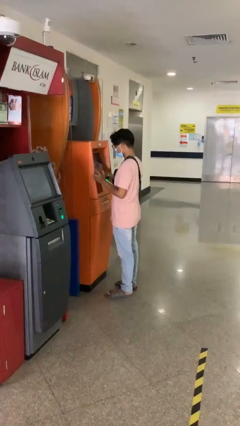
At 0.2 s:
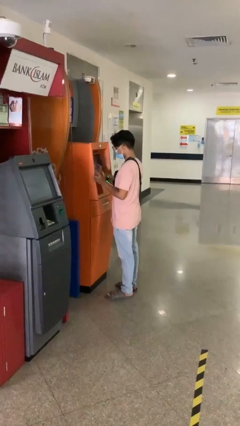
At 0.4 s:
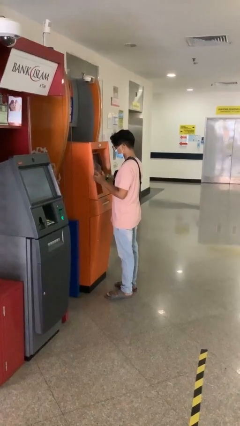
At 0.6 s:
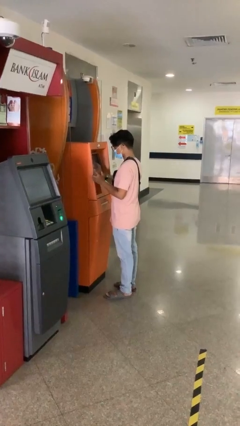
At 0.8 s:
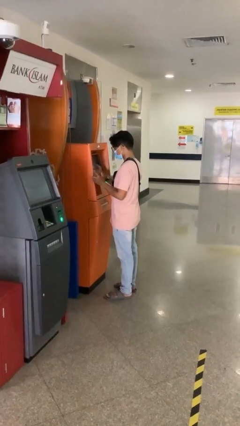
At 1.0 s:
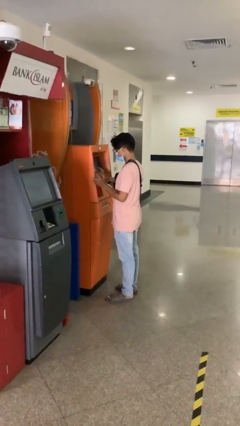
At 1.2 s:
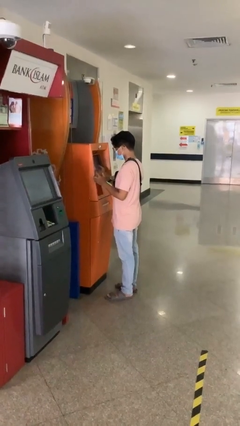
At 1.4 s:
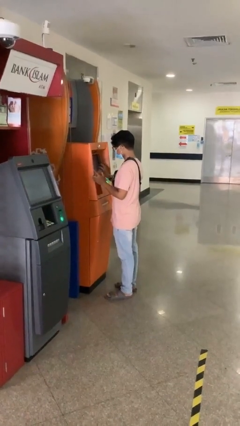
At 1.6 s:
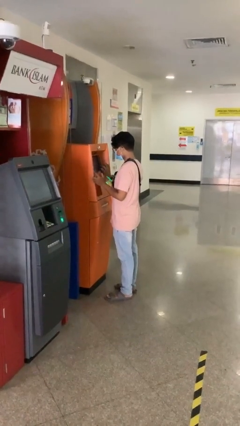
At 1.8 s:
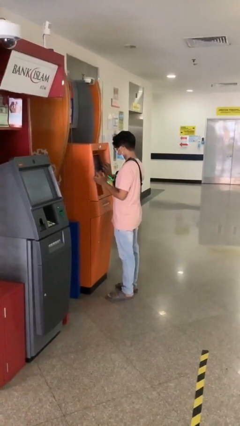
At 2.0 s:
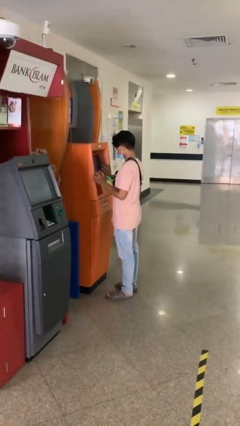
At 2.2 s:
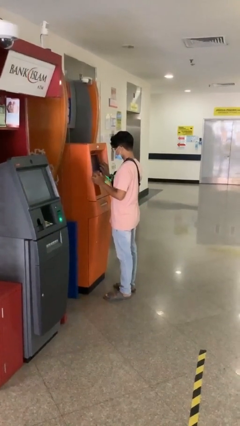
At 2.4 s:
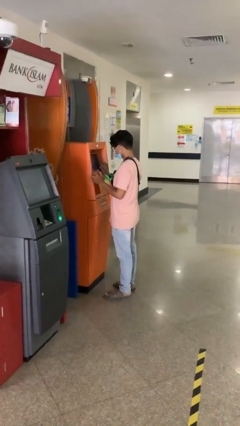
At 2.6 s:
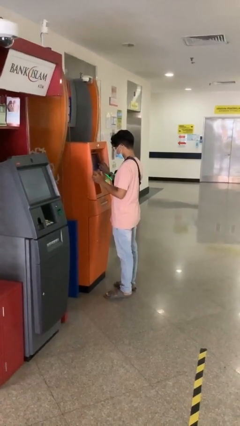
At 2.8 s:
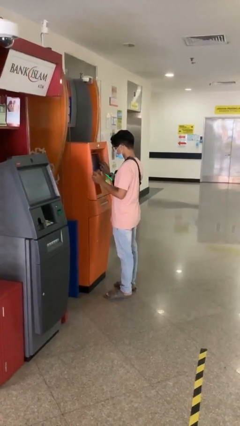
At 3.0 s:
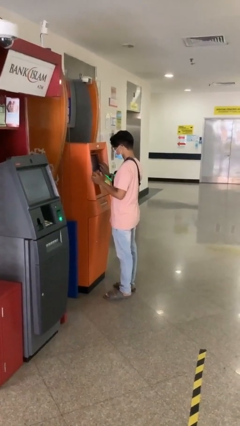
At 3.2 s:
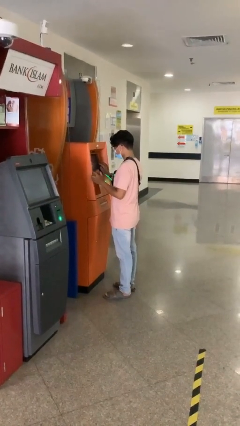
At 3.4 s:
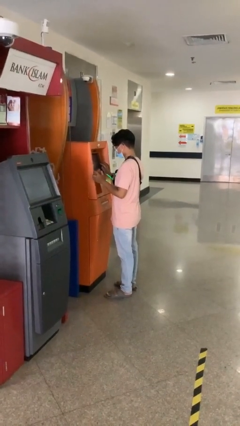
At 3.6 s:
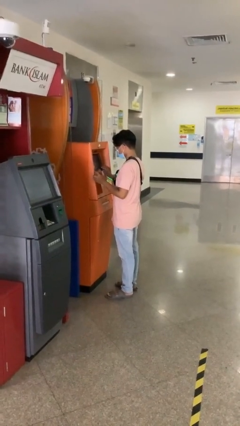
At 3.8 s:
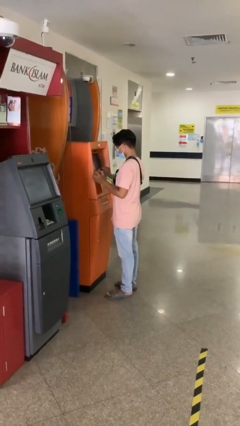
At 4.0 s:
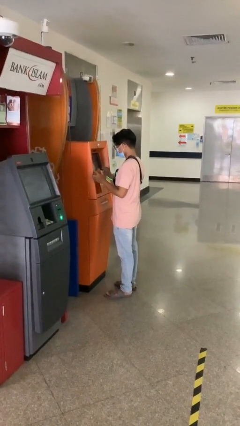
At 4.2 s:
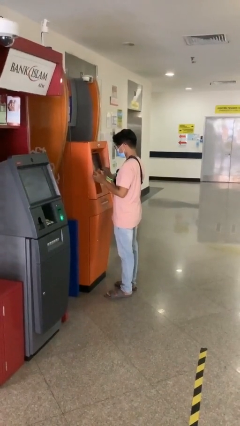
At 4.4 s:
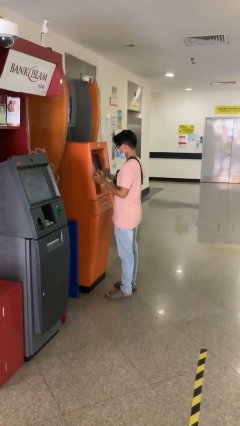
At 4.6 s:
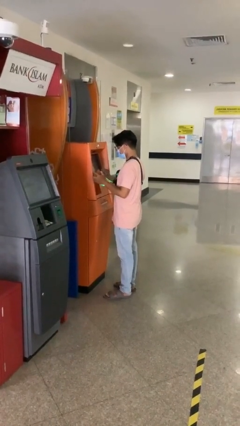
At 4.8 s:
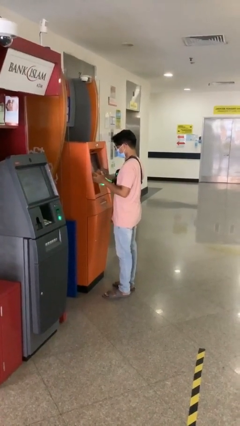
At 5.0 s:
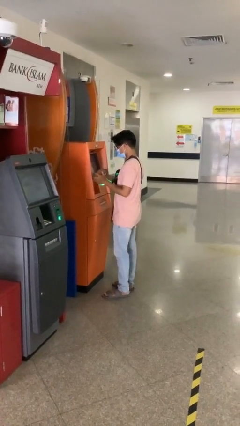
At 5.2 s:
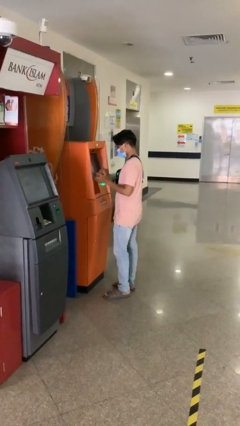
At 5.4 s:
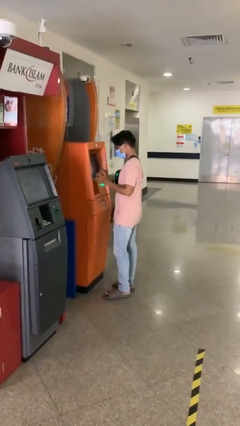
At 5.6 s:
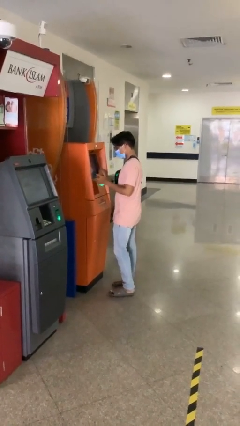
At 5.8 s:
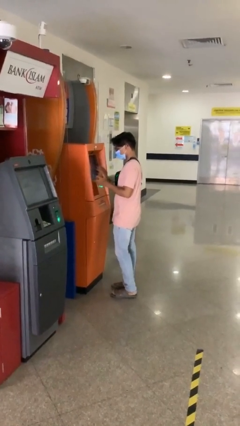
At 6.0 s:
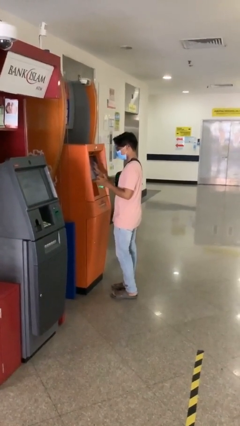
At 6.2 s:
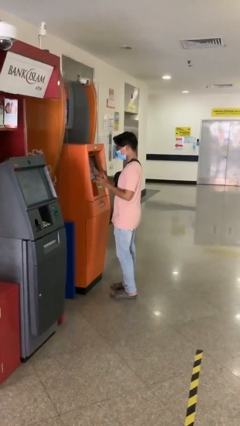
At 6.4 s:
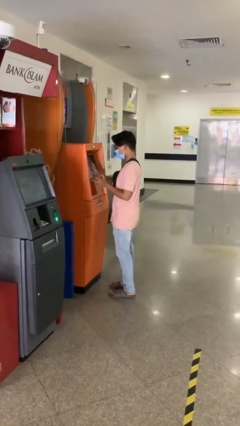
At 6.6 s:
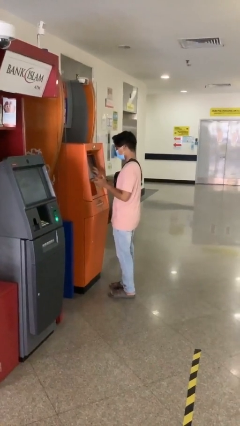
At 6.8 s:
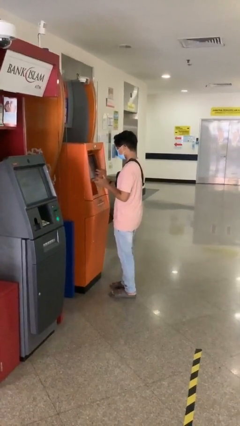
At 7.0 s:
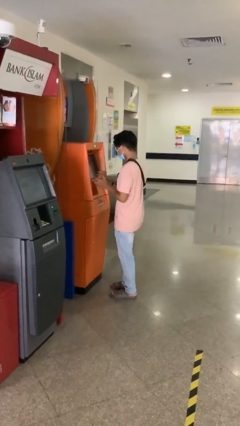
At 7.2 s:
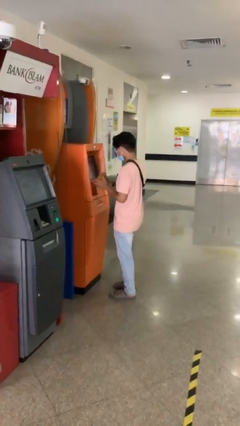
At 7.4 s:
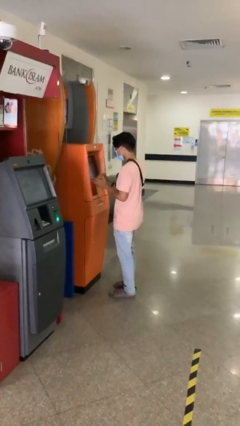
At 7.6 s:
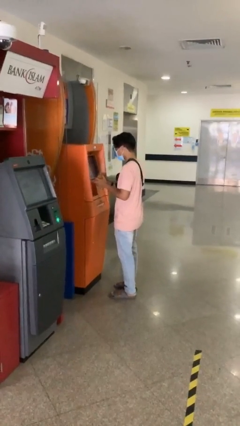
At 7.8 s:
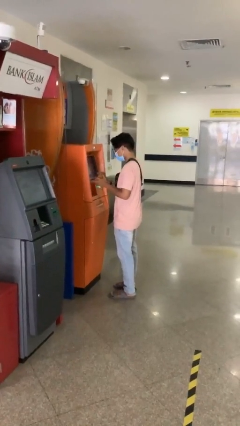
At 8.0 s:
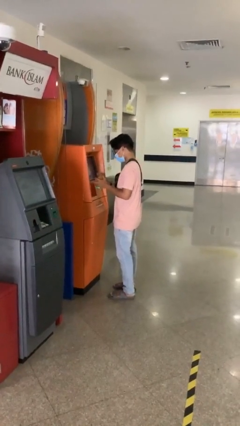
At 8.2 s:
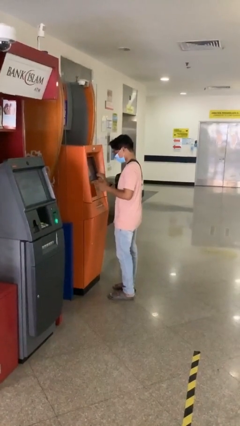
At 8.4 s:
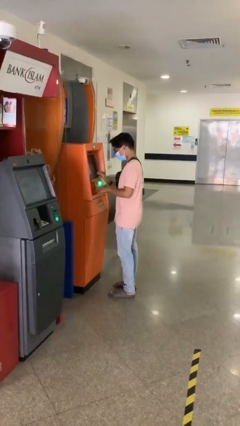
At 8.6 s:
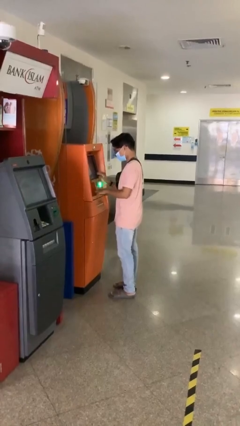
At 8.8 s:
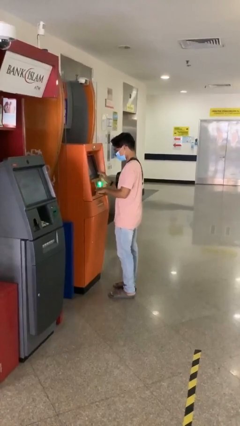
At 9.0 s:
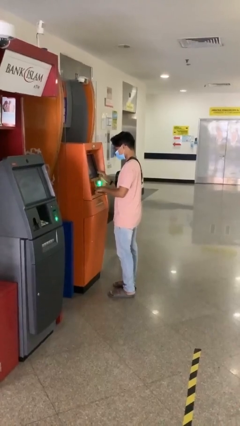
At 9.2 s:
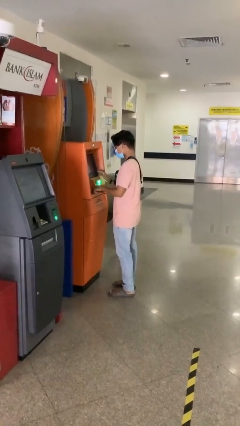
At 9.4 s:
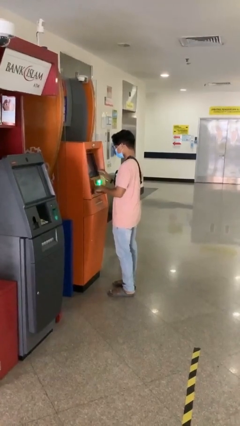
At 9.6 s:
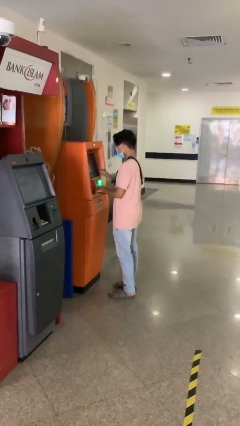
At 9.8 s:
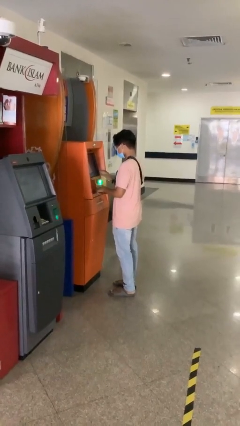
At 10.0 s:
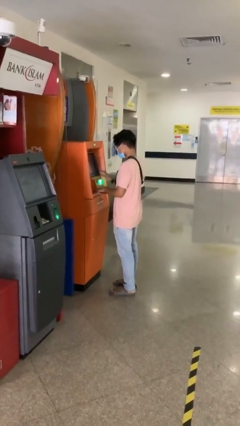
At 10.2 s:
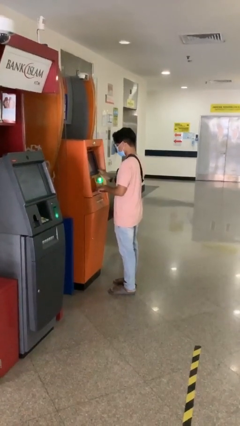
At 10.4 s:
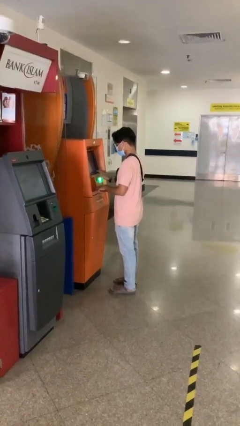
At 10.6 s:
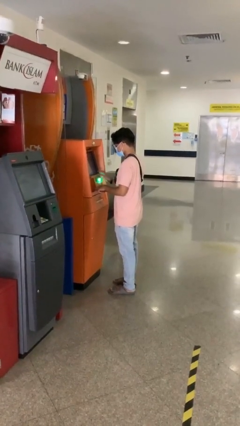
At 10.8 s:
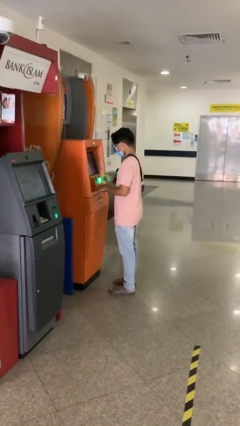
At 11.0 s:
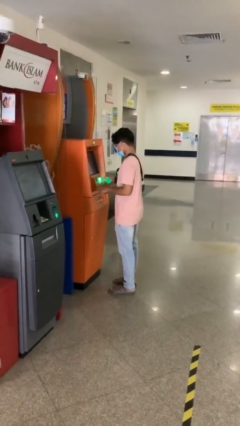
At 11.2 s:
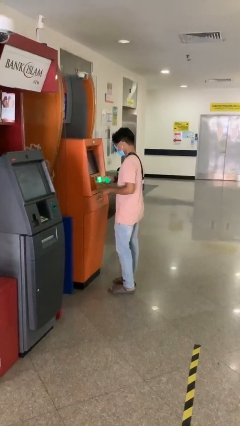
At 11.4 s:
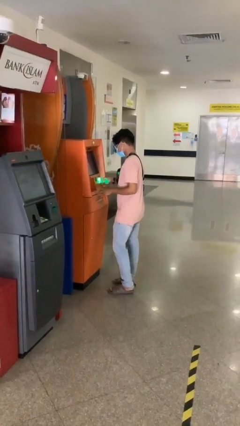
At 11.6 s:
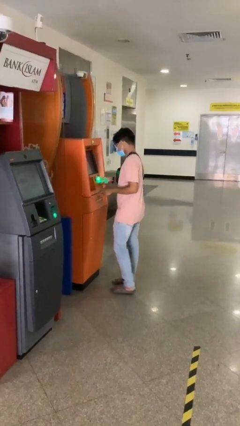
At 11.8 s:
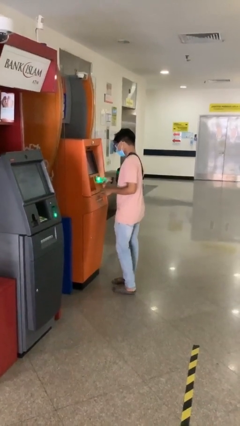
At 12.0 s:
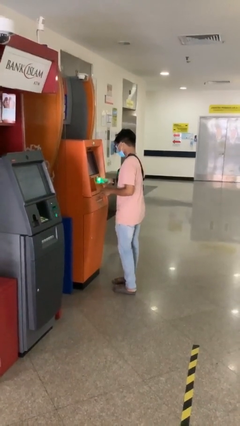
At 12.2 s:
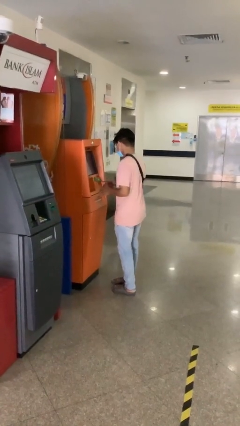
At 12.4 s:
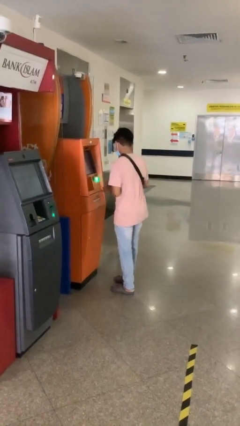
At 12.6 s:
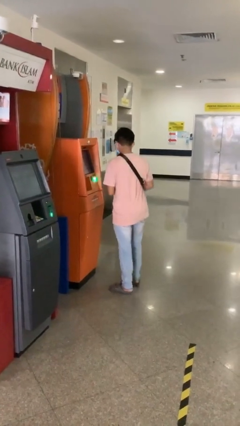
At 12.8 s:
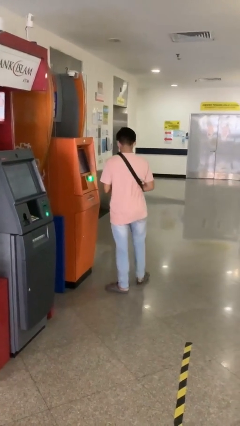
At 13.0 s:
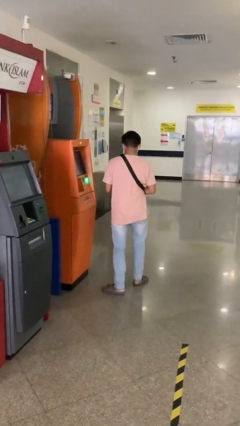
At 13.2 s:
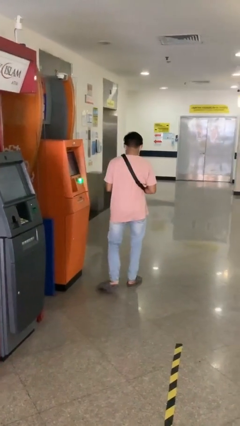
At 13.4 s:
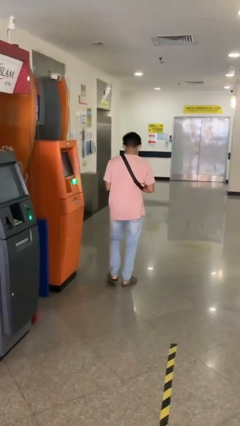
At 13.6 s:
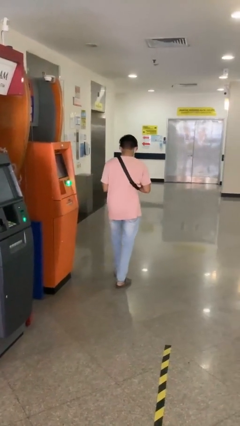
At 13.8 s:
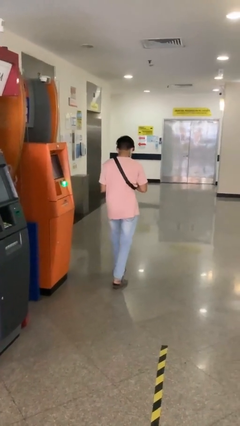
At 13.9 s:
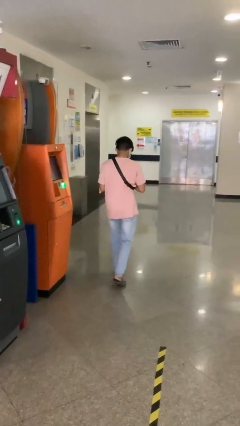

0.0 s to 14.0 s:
person purchases from machine

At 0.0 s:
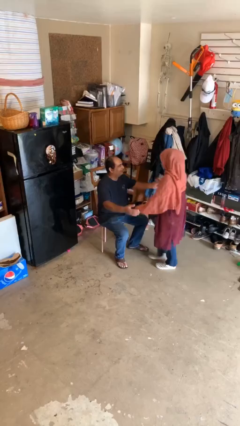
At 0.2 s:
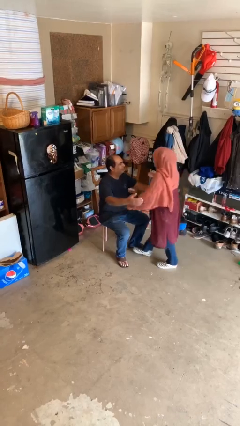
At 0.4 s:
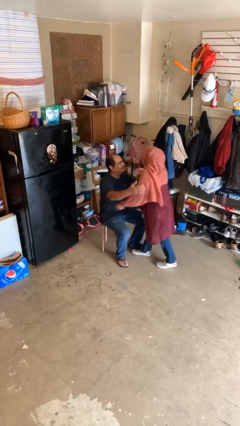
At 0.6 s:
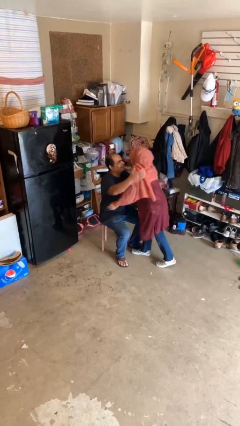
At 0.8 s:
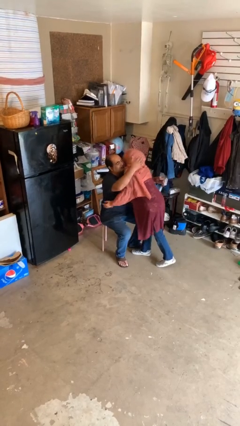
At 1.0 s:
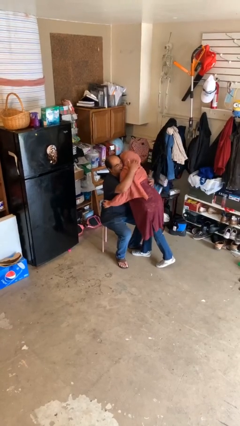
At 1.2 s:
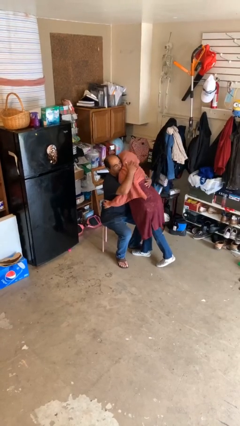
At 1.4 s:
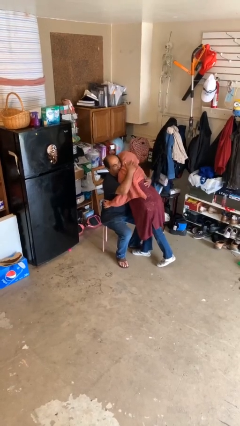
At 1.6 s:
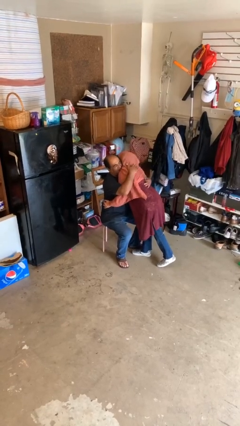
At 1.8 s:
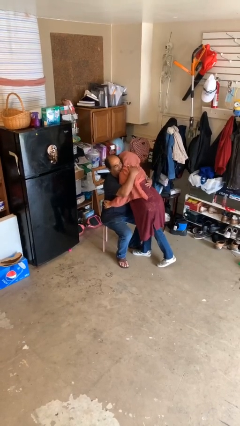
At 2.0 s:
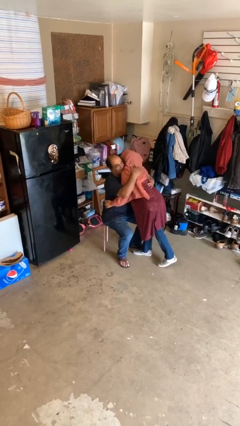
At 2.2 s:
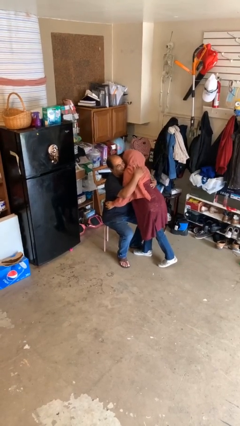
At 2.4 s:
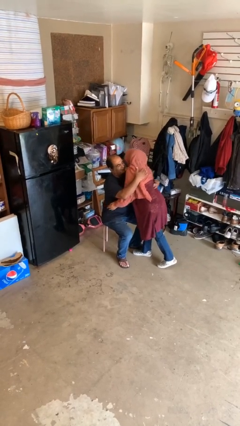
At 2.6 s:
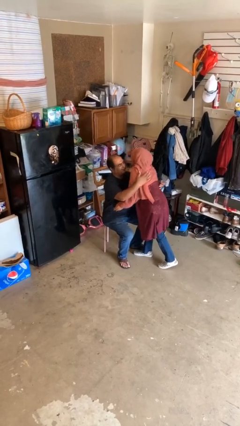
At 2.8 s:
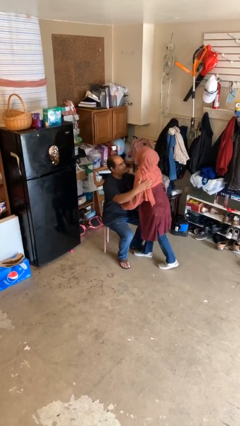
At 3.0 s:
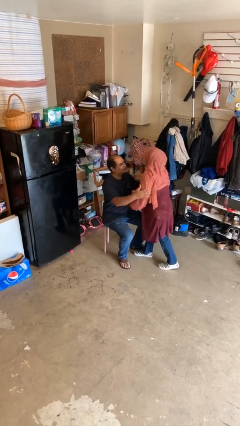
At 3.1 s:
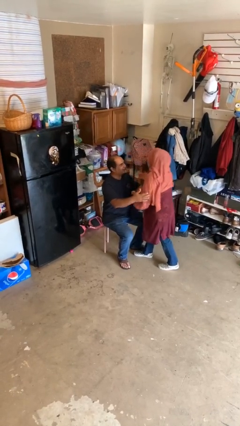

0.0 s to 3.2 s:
person embraces person

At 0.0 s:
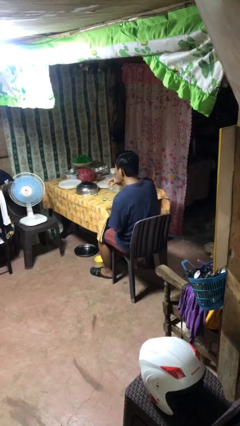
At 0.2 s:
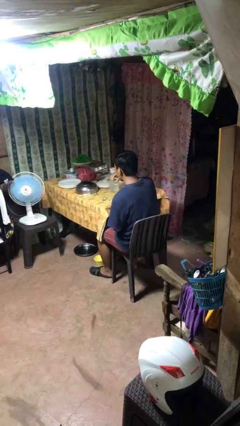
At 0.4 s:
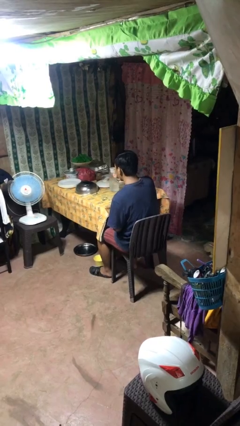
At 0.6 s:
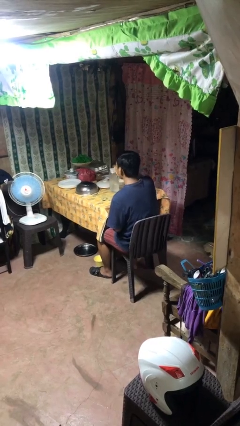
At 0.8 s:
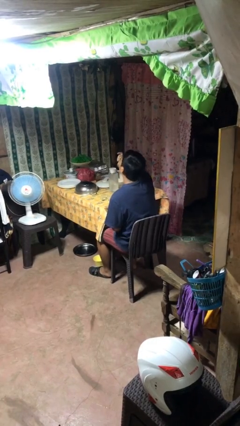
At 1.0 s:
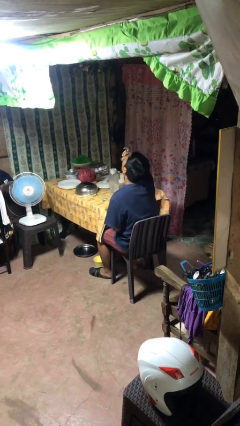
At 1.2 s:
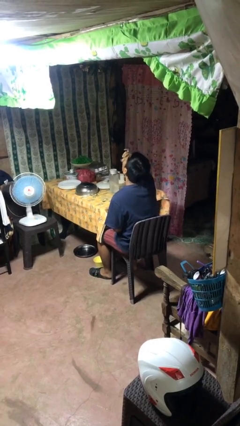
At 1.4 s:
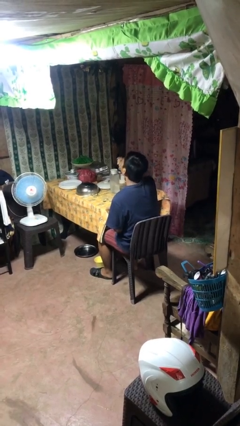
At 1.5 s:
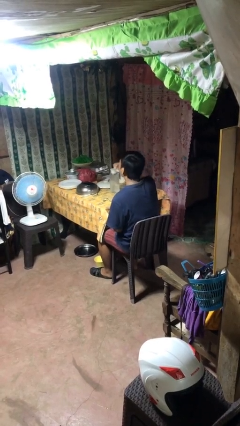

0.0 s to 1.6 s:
person drinks from shotglass
